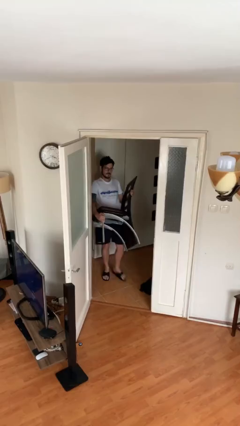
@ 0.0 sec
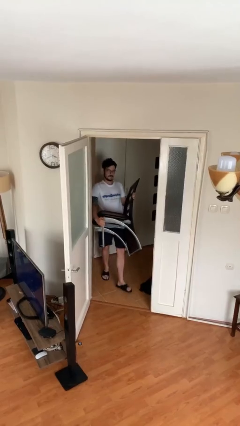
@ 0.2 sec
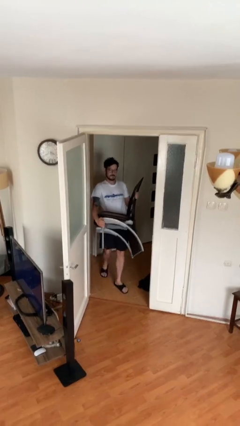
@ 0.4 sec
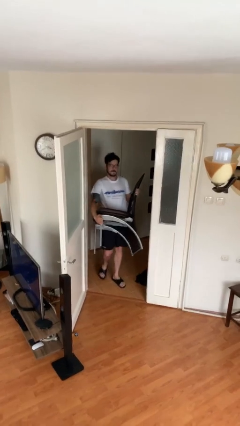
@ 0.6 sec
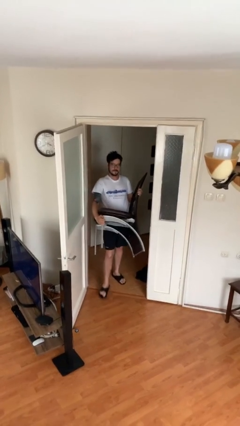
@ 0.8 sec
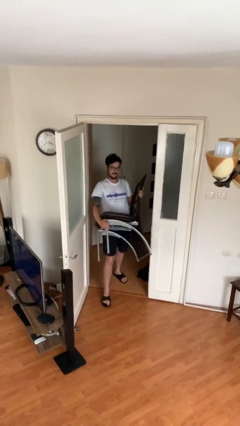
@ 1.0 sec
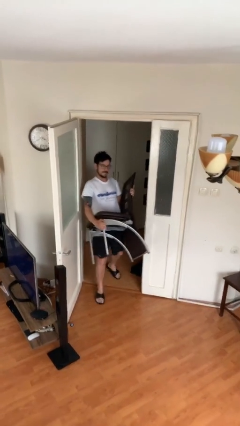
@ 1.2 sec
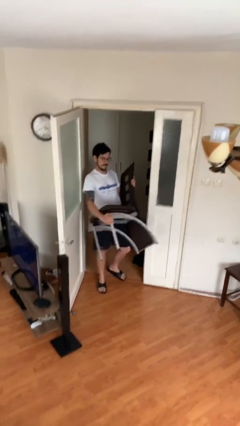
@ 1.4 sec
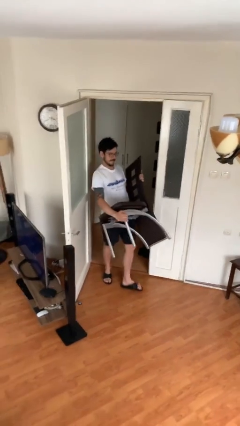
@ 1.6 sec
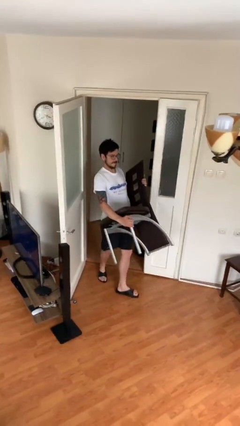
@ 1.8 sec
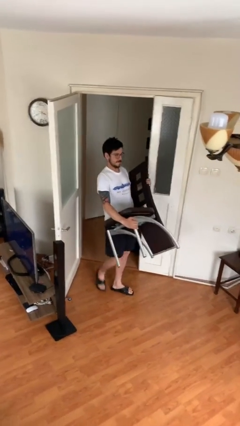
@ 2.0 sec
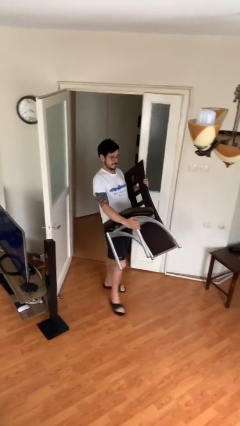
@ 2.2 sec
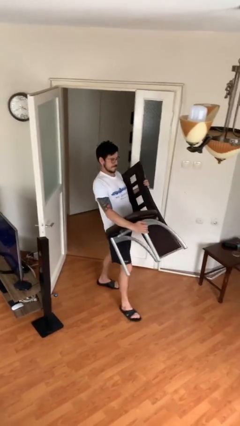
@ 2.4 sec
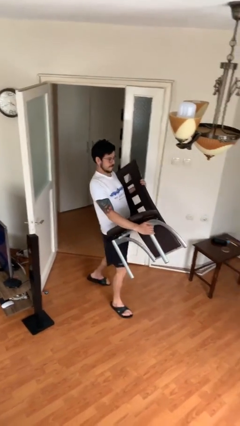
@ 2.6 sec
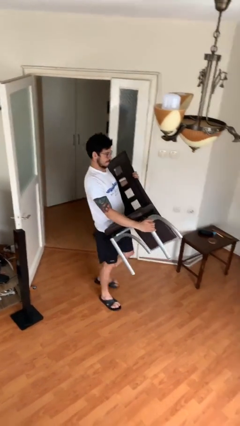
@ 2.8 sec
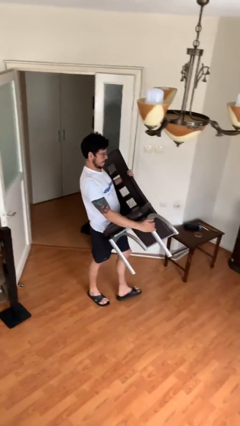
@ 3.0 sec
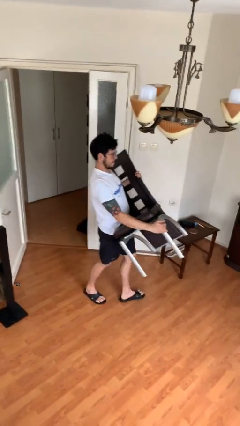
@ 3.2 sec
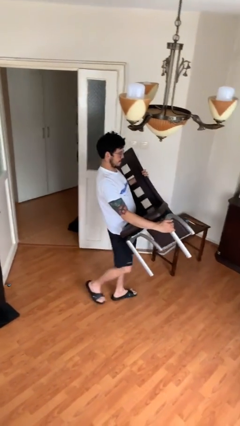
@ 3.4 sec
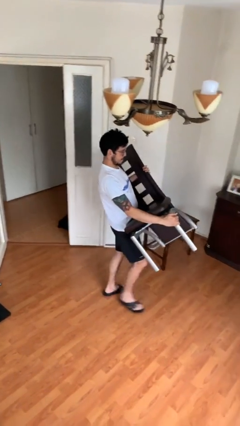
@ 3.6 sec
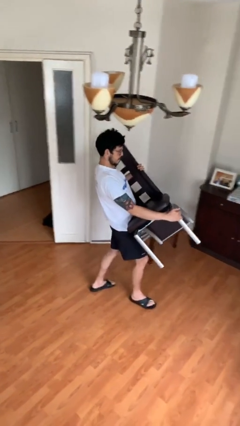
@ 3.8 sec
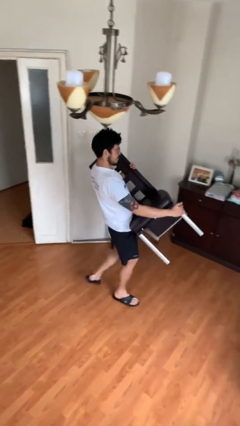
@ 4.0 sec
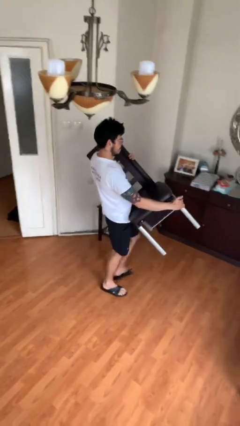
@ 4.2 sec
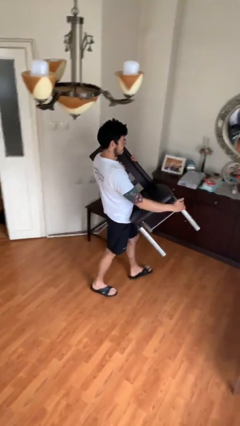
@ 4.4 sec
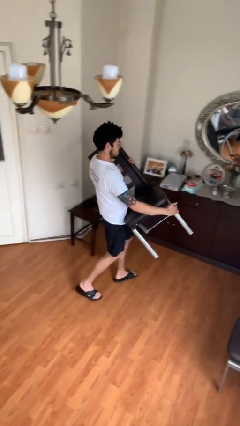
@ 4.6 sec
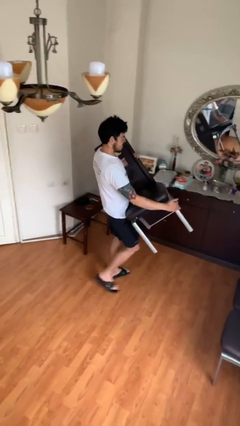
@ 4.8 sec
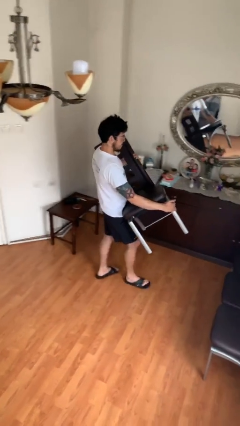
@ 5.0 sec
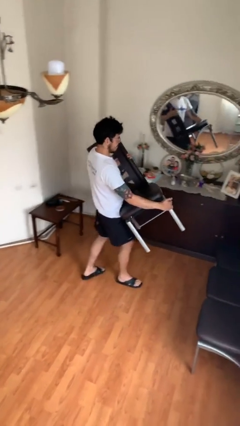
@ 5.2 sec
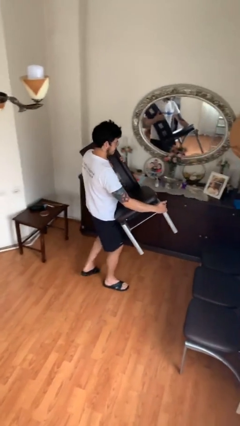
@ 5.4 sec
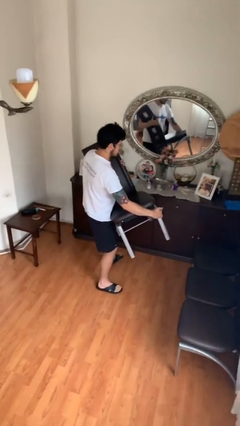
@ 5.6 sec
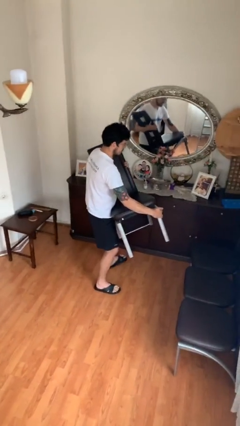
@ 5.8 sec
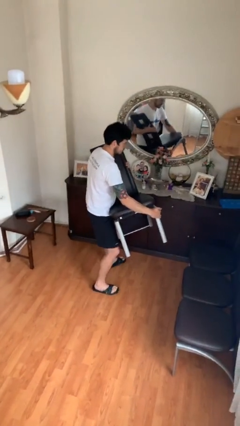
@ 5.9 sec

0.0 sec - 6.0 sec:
person carries heavy object

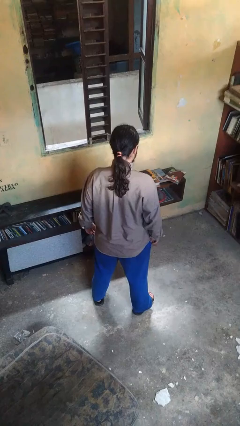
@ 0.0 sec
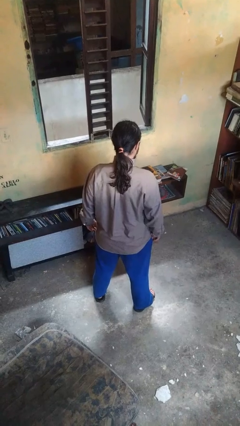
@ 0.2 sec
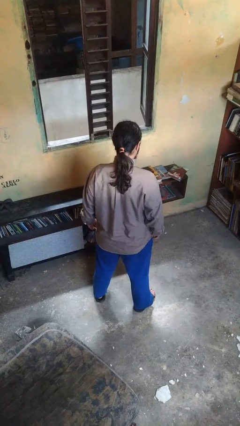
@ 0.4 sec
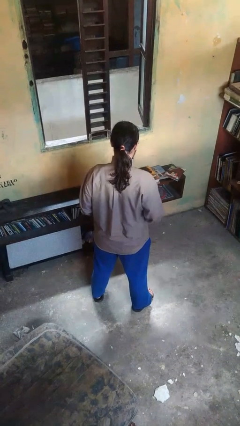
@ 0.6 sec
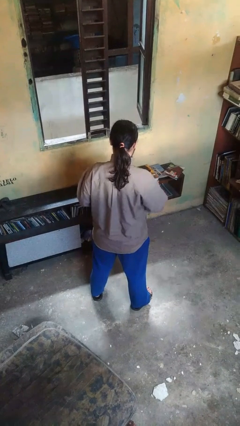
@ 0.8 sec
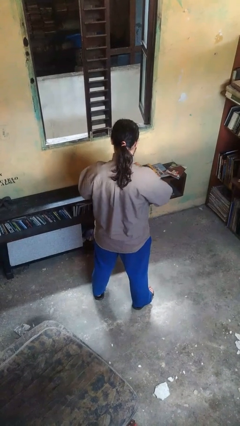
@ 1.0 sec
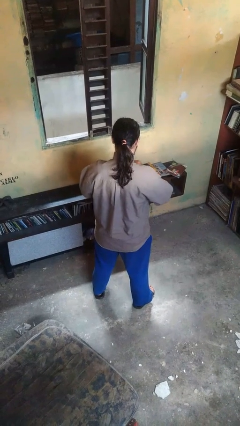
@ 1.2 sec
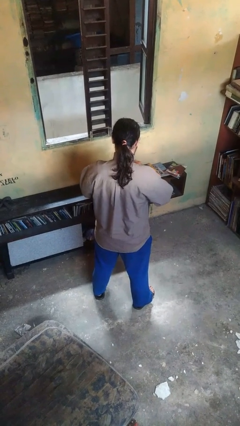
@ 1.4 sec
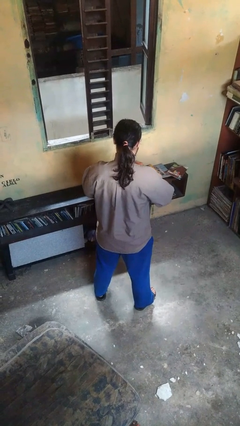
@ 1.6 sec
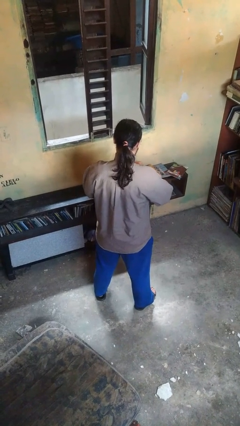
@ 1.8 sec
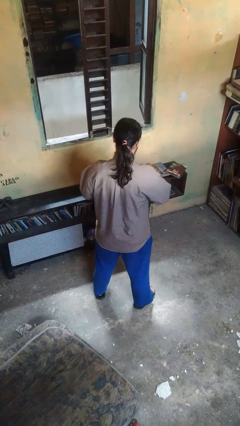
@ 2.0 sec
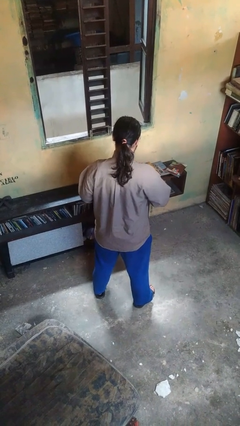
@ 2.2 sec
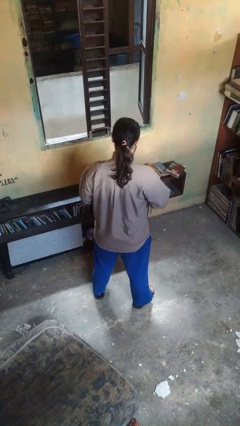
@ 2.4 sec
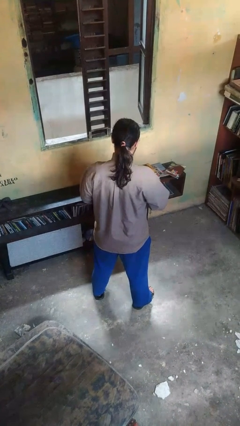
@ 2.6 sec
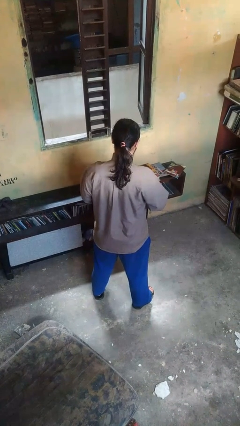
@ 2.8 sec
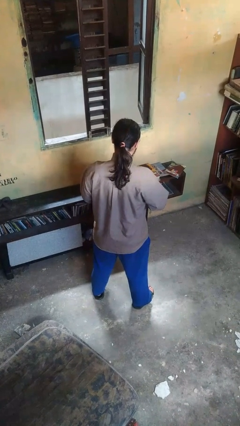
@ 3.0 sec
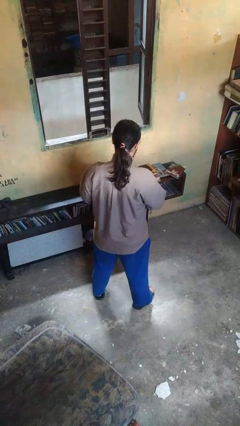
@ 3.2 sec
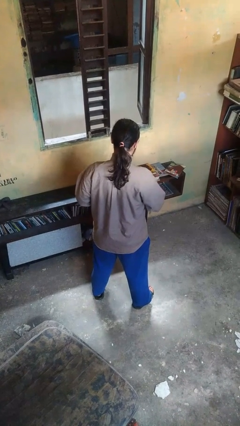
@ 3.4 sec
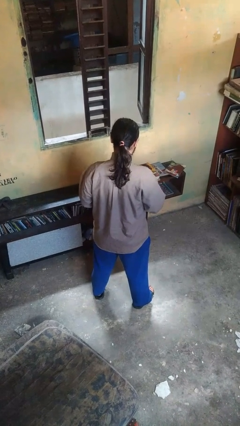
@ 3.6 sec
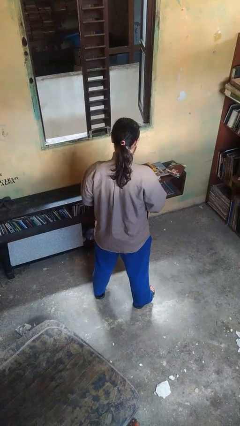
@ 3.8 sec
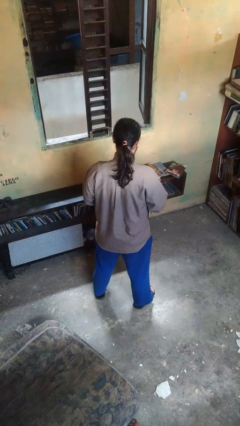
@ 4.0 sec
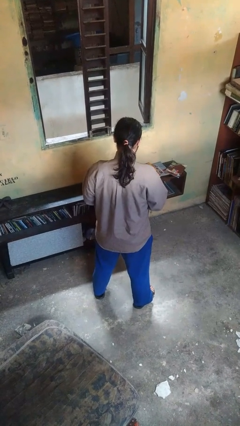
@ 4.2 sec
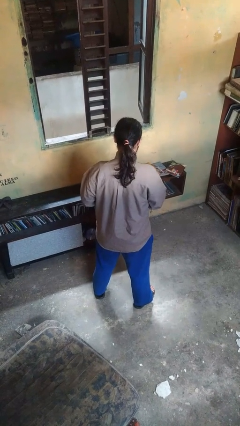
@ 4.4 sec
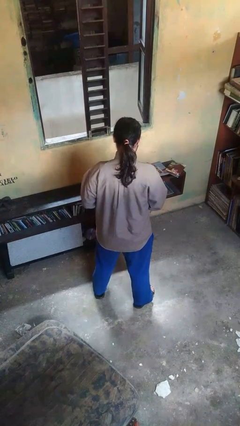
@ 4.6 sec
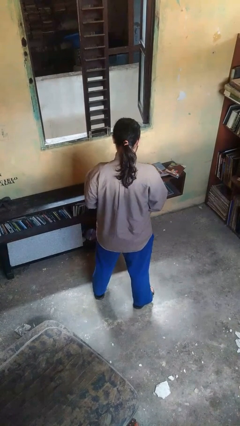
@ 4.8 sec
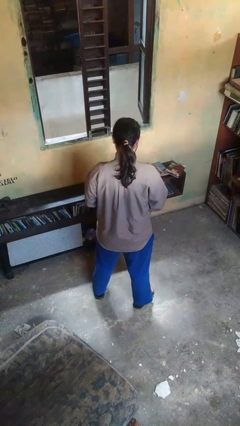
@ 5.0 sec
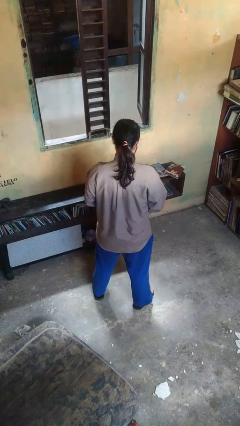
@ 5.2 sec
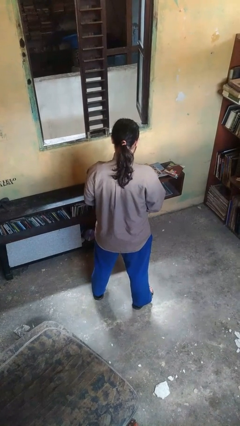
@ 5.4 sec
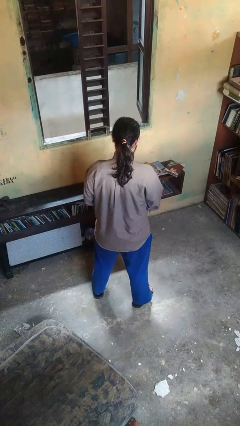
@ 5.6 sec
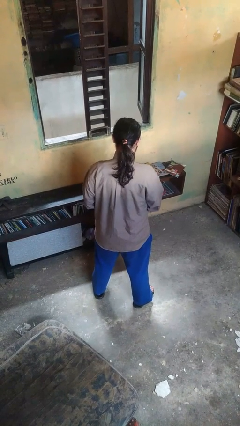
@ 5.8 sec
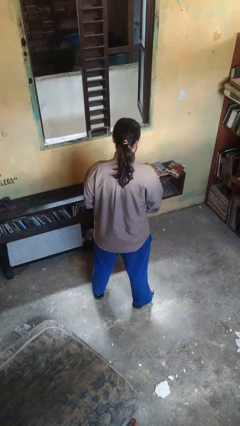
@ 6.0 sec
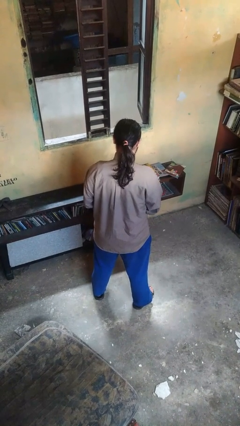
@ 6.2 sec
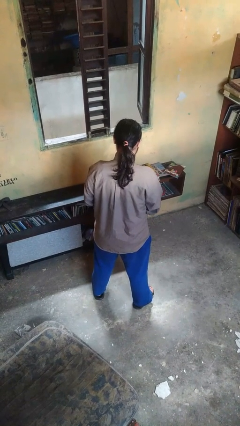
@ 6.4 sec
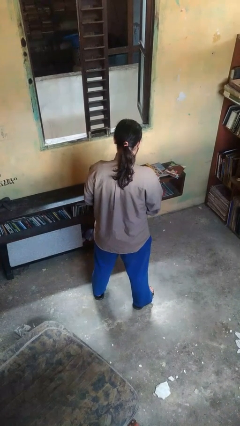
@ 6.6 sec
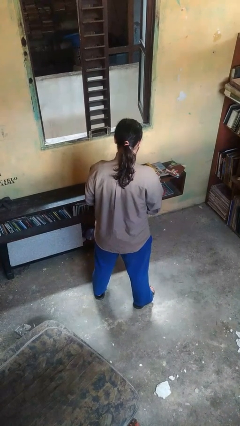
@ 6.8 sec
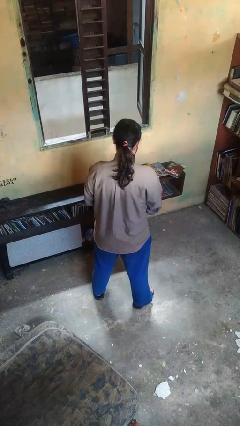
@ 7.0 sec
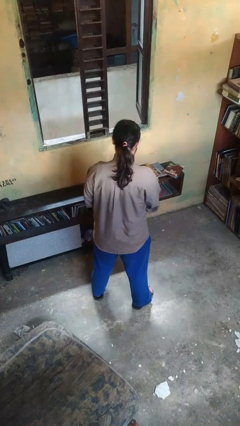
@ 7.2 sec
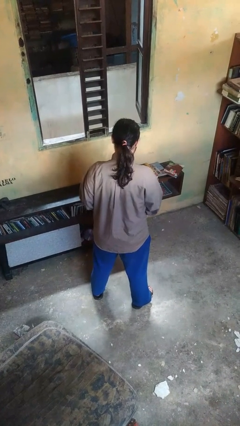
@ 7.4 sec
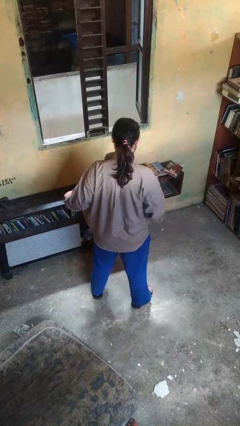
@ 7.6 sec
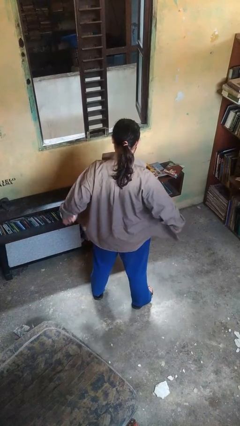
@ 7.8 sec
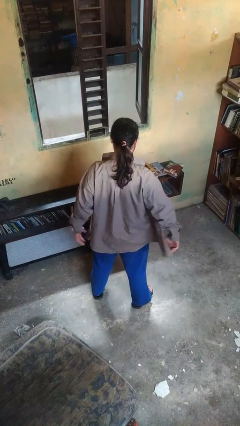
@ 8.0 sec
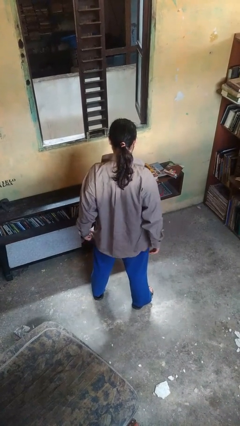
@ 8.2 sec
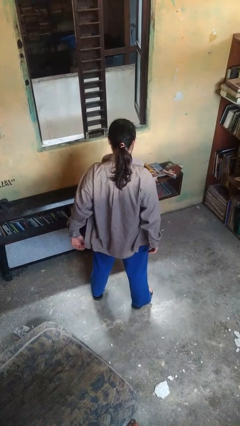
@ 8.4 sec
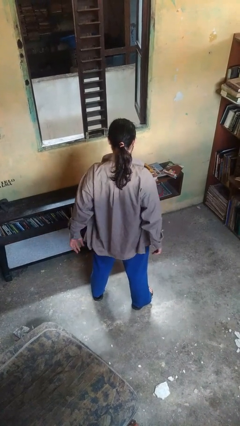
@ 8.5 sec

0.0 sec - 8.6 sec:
person unbuttons shirt

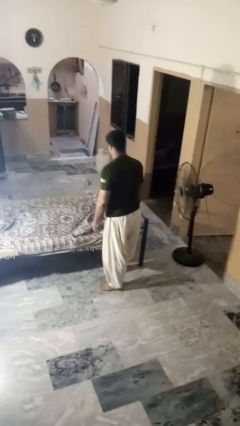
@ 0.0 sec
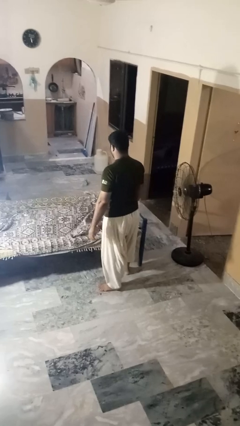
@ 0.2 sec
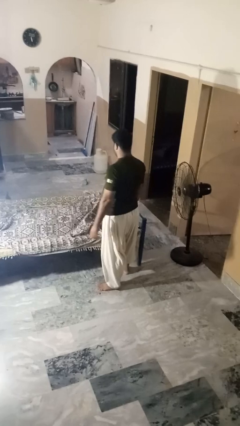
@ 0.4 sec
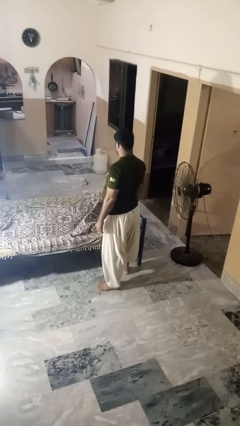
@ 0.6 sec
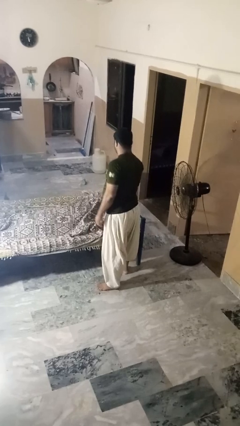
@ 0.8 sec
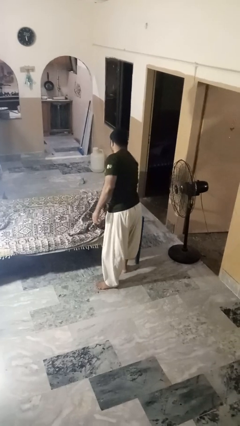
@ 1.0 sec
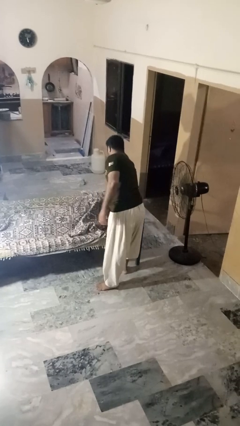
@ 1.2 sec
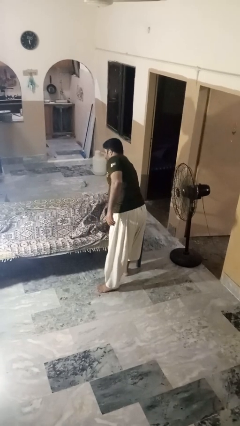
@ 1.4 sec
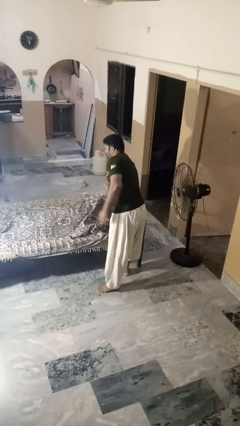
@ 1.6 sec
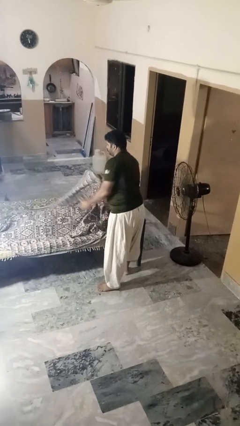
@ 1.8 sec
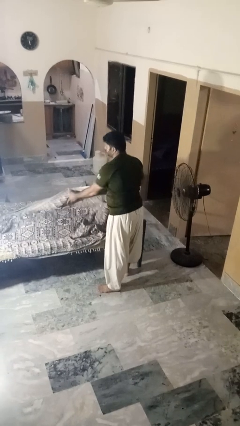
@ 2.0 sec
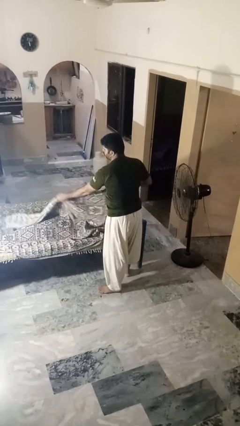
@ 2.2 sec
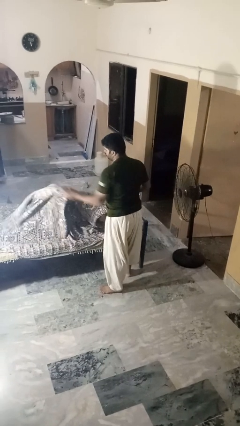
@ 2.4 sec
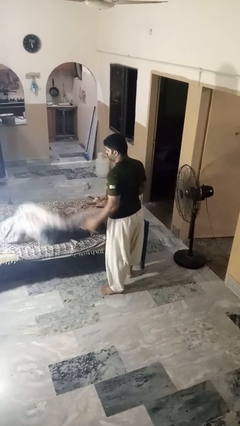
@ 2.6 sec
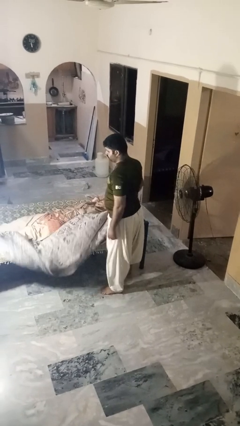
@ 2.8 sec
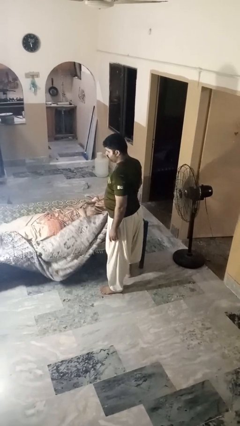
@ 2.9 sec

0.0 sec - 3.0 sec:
person uncovers friend with blanket
